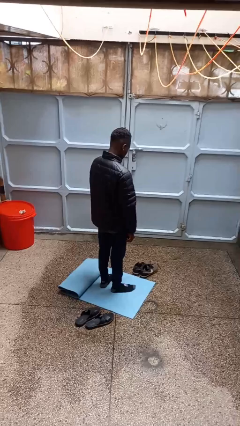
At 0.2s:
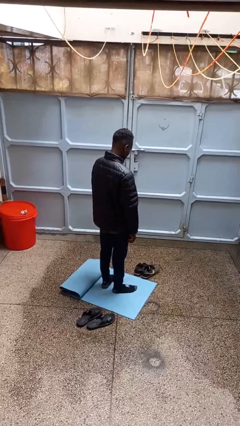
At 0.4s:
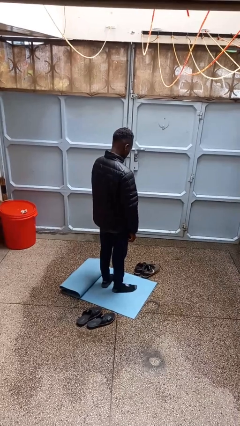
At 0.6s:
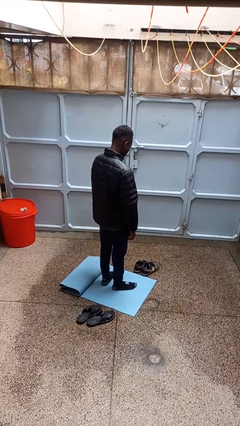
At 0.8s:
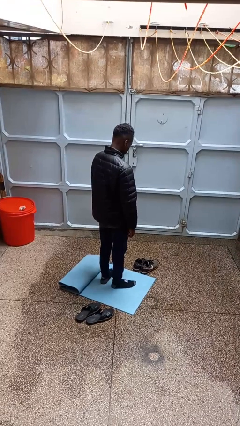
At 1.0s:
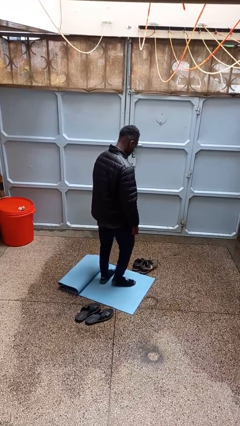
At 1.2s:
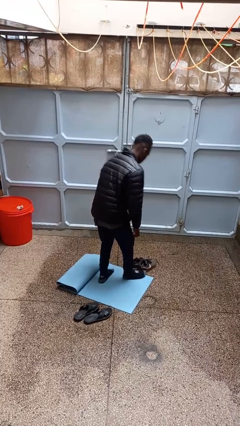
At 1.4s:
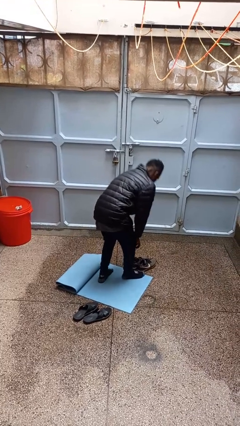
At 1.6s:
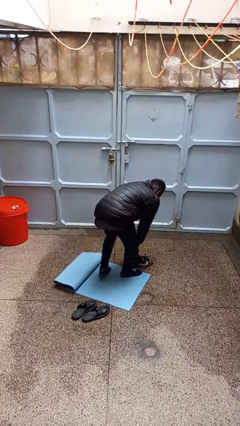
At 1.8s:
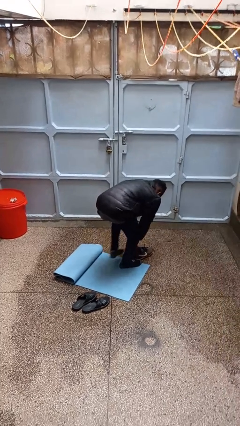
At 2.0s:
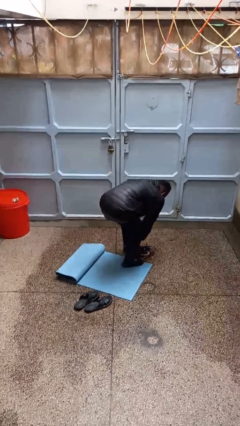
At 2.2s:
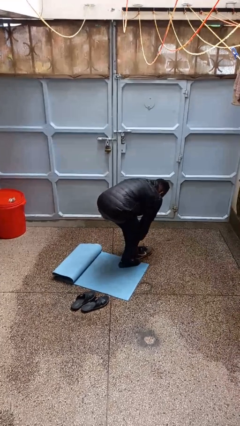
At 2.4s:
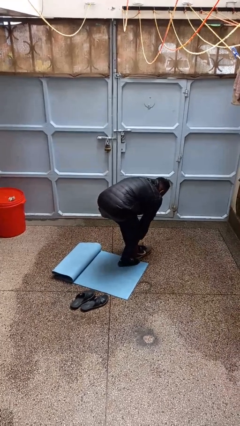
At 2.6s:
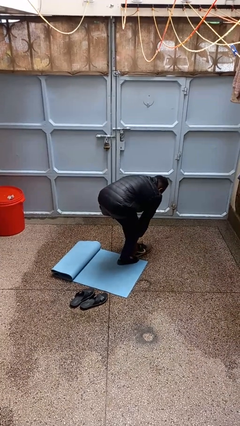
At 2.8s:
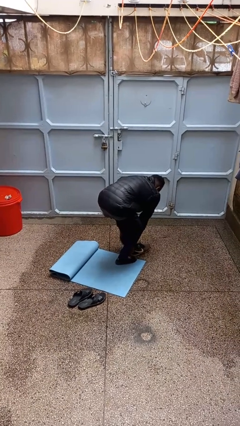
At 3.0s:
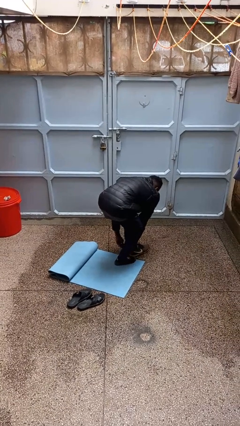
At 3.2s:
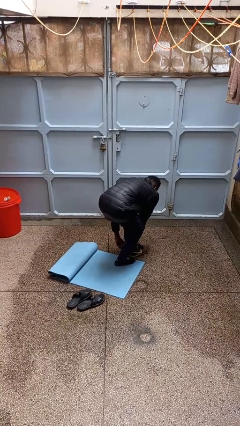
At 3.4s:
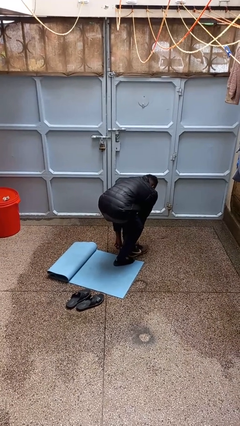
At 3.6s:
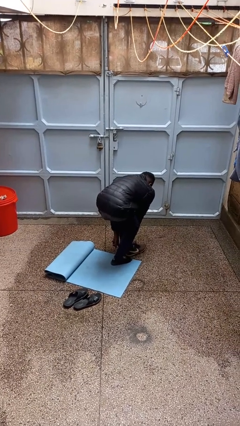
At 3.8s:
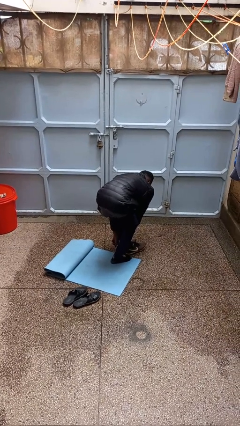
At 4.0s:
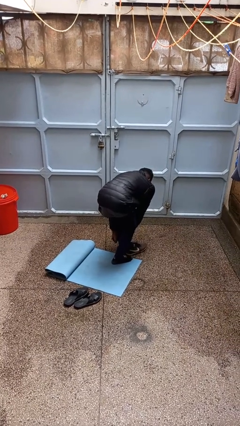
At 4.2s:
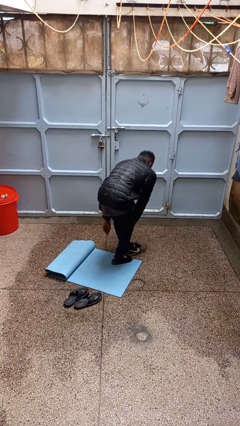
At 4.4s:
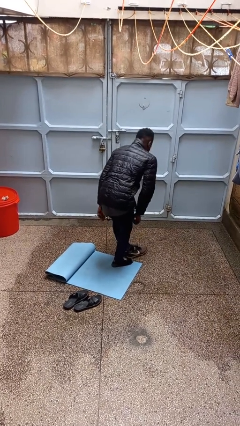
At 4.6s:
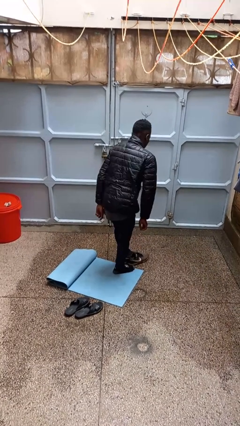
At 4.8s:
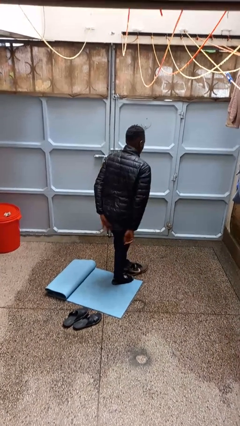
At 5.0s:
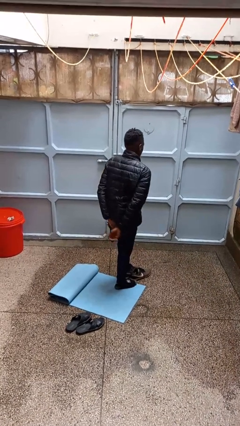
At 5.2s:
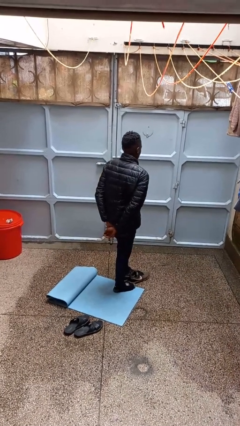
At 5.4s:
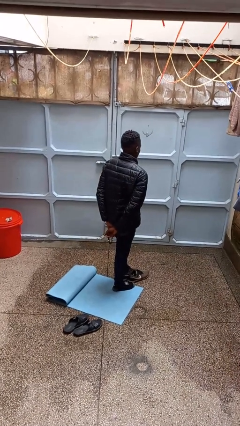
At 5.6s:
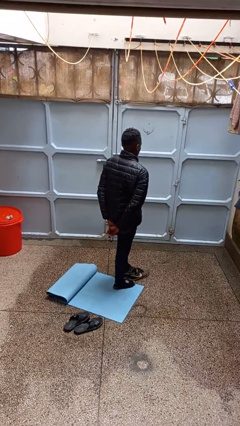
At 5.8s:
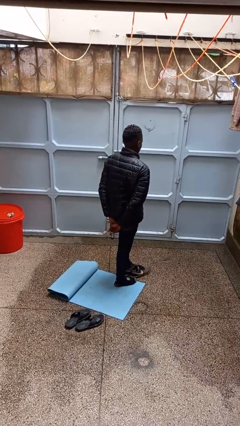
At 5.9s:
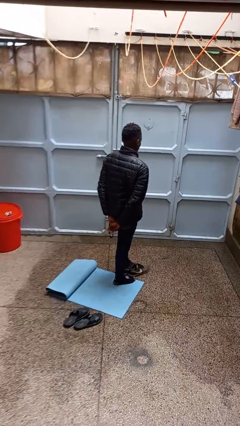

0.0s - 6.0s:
person puts on shoes

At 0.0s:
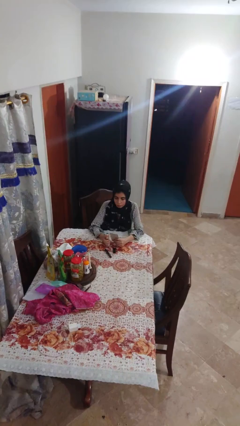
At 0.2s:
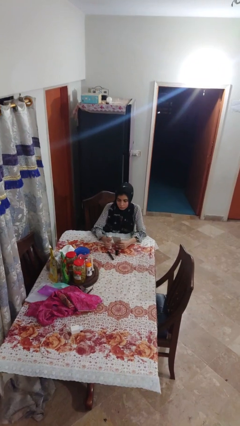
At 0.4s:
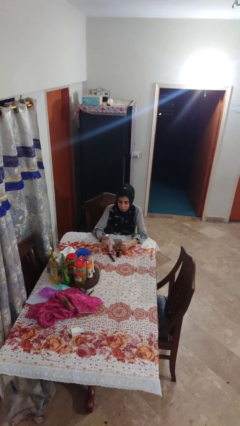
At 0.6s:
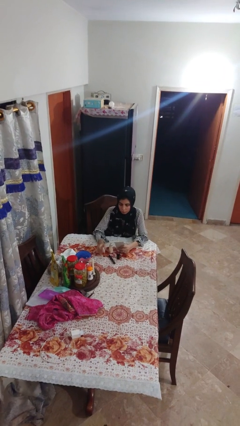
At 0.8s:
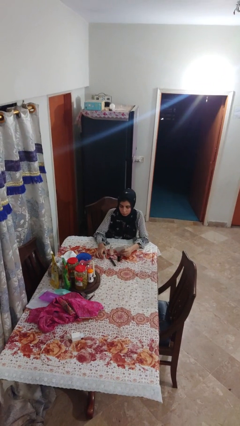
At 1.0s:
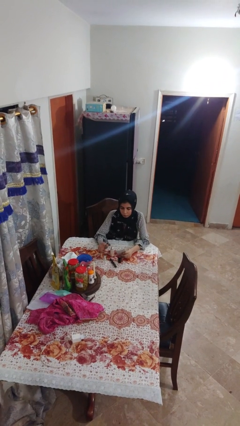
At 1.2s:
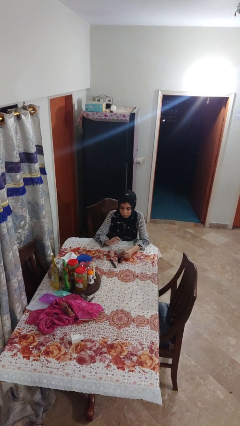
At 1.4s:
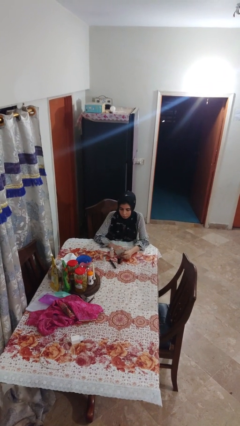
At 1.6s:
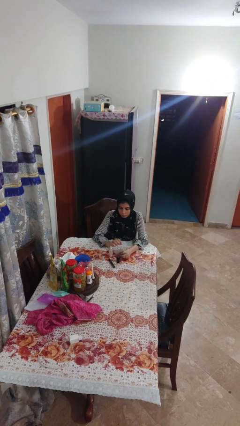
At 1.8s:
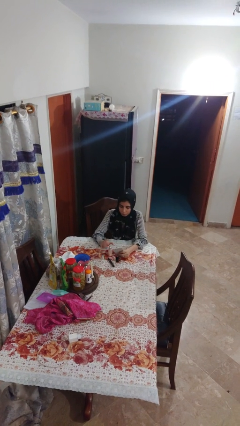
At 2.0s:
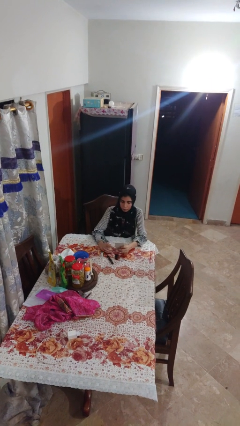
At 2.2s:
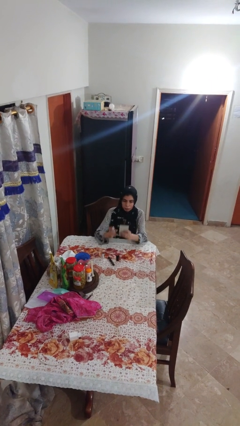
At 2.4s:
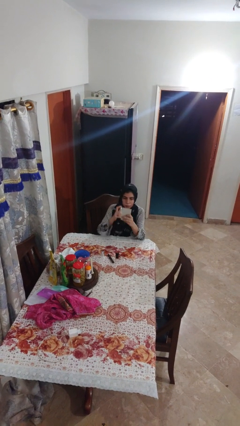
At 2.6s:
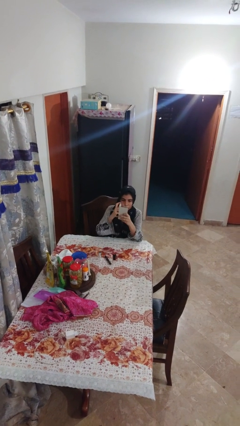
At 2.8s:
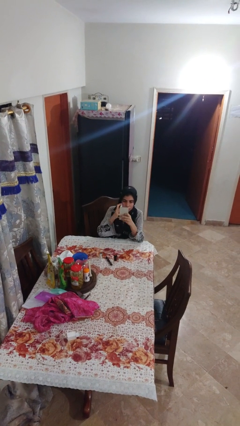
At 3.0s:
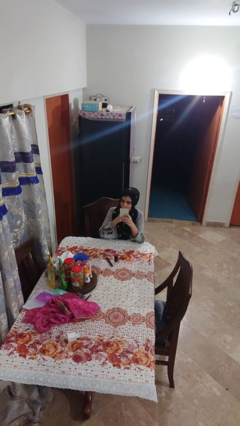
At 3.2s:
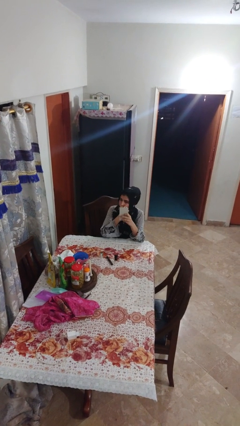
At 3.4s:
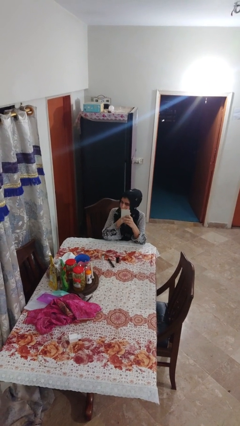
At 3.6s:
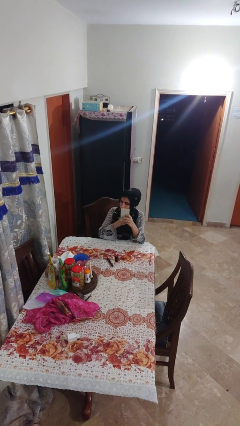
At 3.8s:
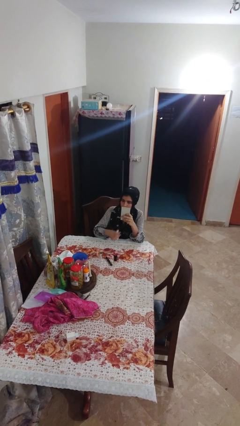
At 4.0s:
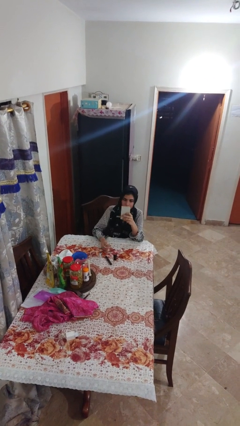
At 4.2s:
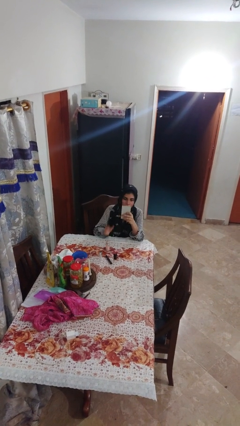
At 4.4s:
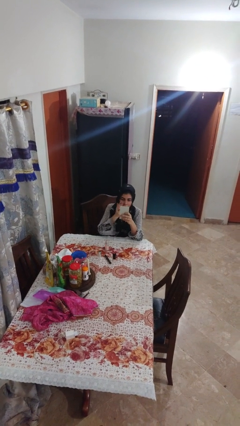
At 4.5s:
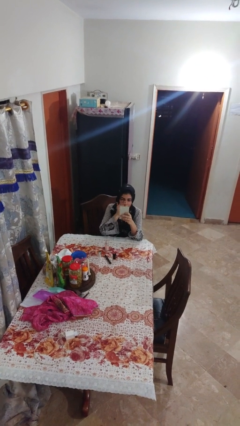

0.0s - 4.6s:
person applies foundation makeup

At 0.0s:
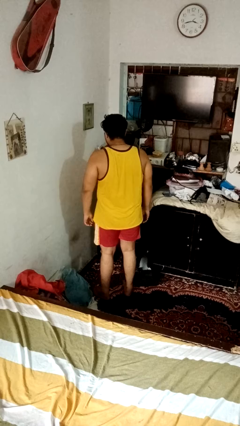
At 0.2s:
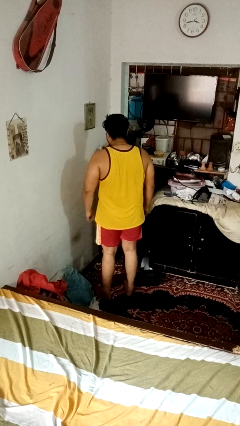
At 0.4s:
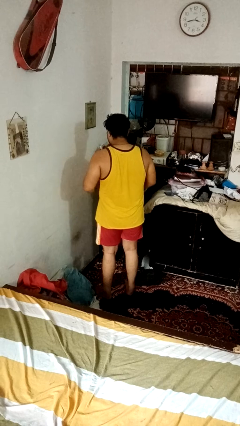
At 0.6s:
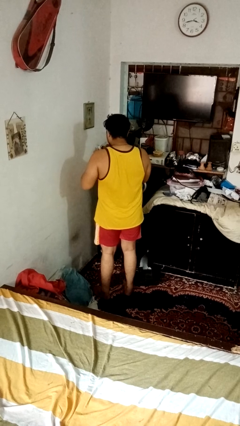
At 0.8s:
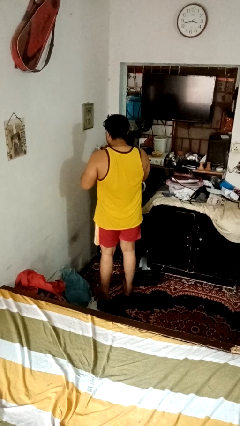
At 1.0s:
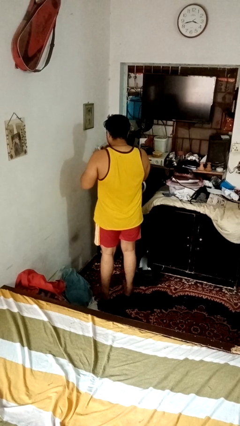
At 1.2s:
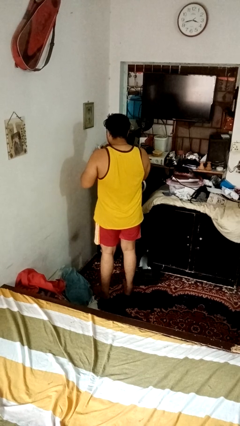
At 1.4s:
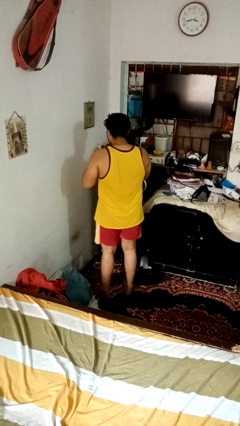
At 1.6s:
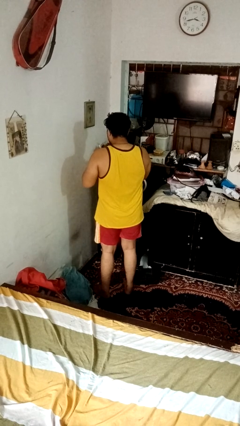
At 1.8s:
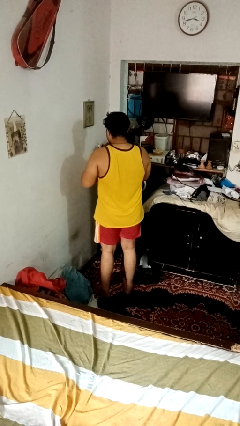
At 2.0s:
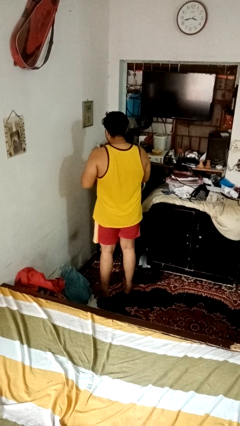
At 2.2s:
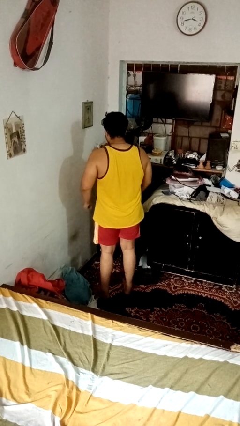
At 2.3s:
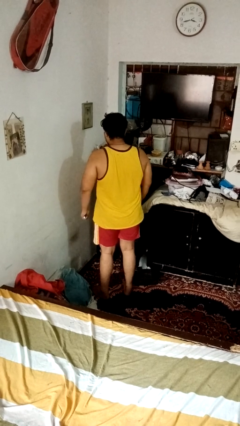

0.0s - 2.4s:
person files fingernails

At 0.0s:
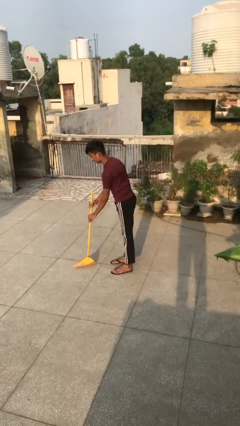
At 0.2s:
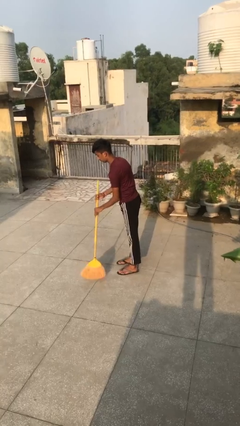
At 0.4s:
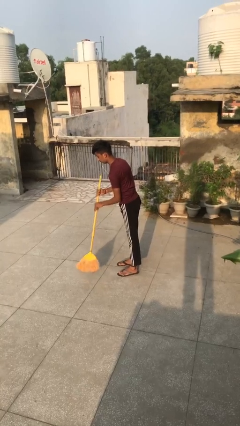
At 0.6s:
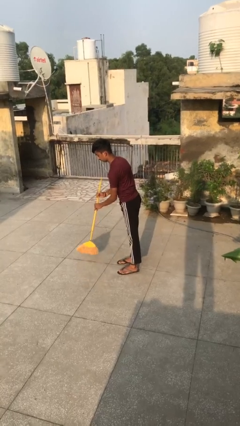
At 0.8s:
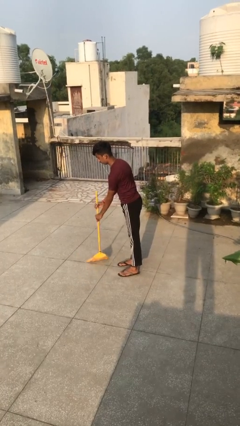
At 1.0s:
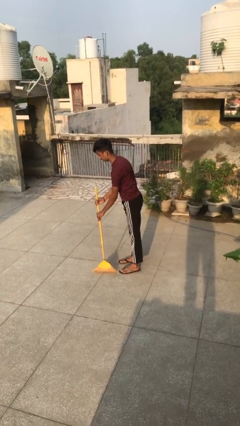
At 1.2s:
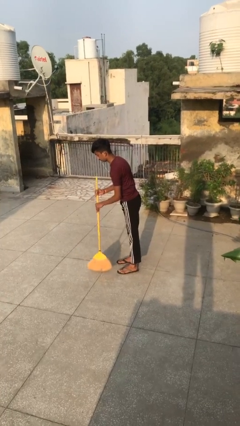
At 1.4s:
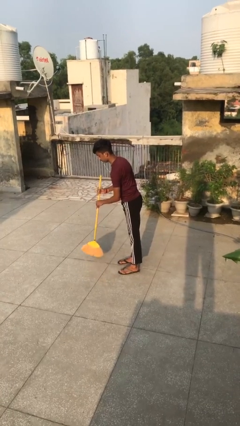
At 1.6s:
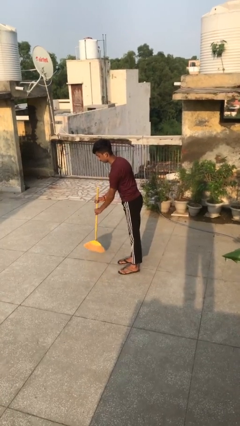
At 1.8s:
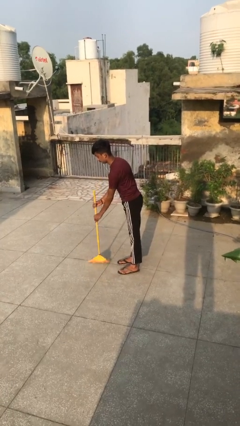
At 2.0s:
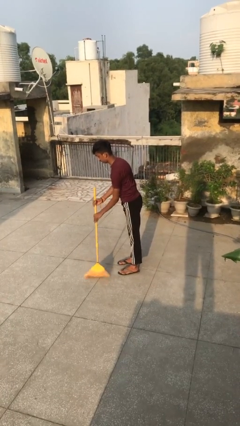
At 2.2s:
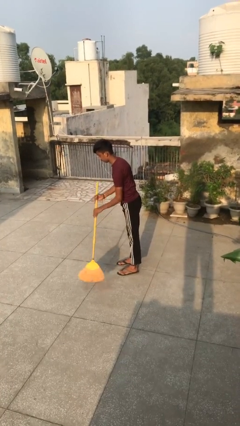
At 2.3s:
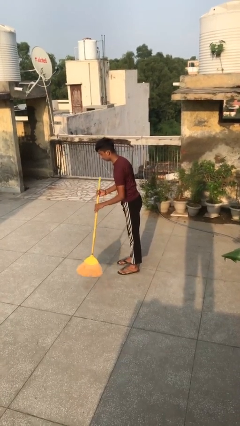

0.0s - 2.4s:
person sweeps floor

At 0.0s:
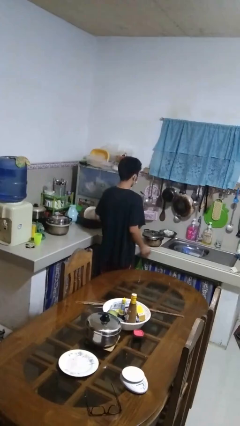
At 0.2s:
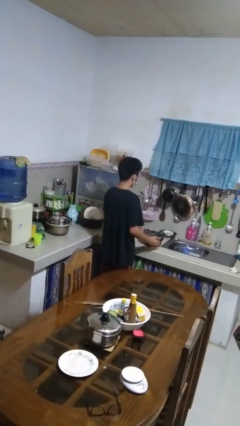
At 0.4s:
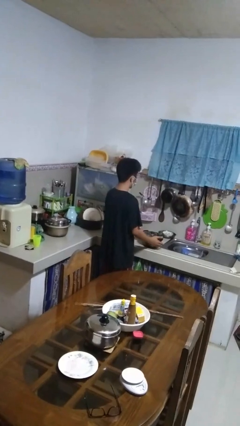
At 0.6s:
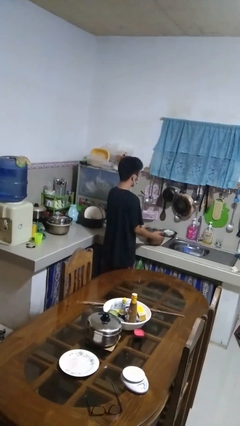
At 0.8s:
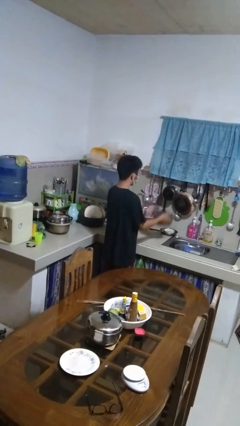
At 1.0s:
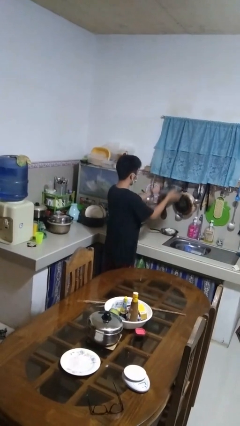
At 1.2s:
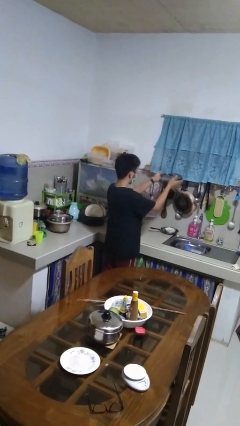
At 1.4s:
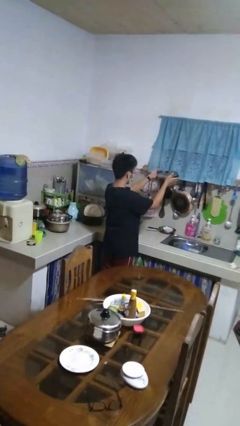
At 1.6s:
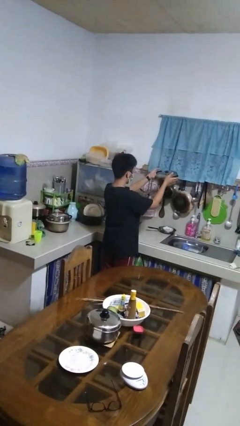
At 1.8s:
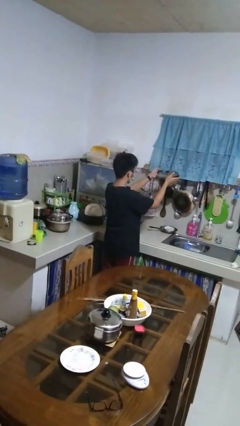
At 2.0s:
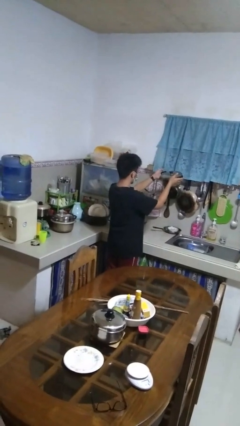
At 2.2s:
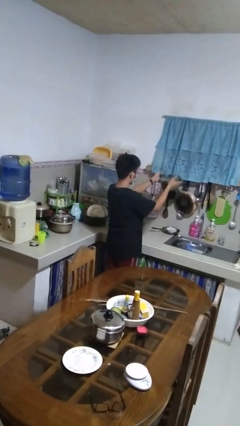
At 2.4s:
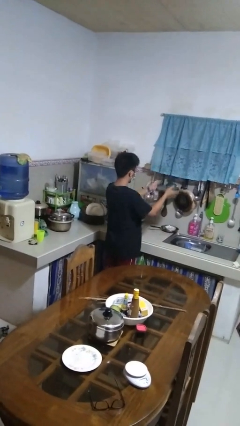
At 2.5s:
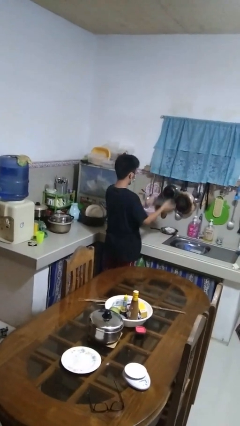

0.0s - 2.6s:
person picks up object from countertop
